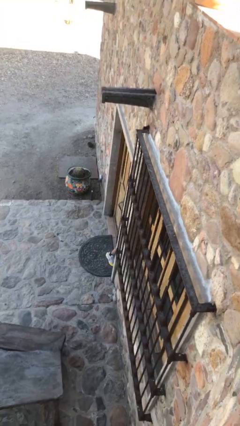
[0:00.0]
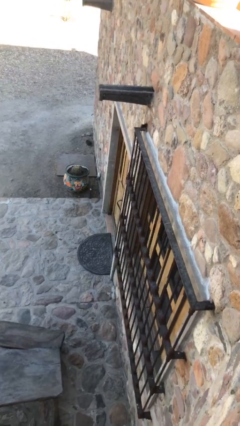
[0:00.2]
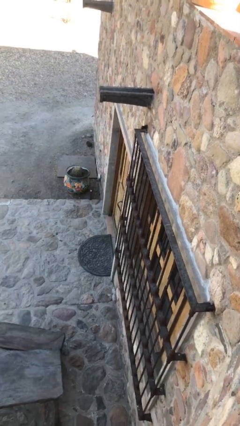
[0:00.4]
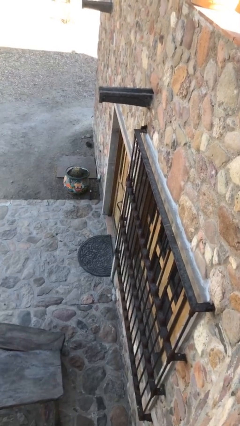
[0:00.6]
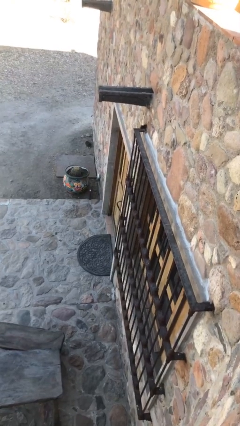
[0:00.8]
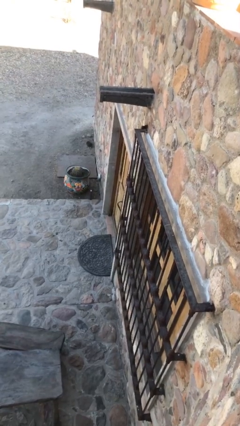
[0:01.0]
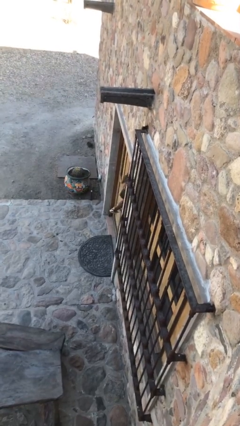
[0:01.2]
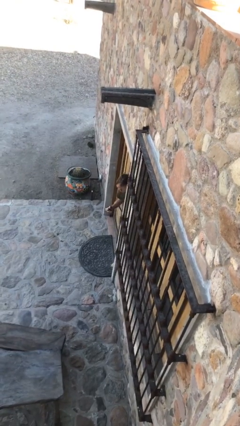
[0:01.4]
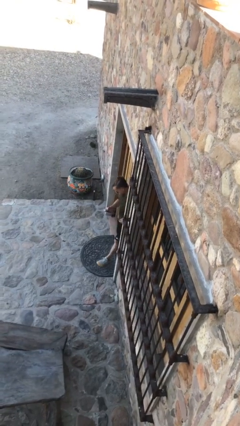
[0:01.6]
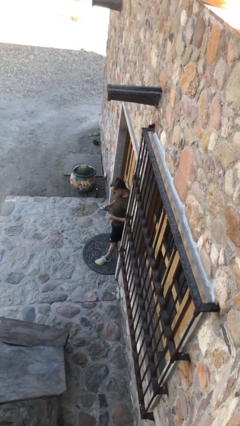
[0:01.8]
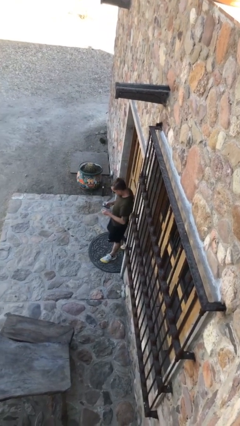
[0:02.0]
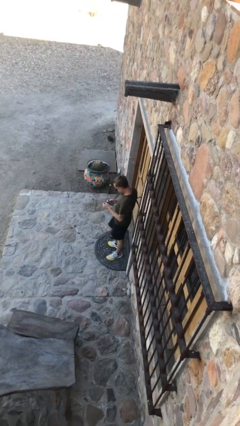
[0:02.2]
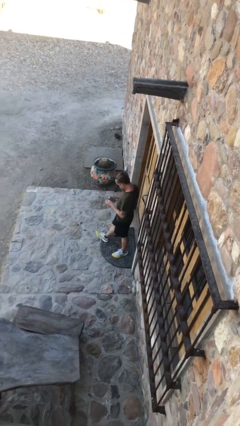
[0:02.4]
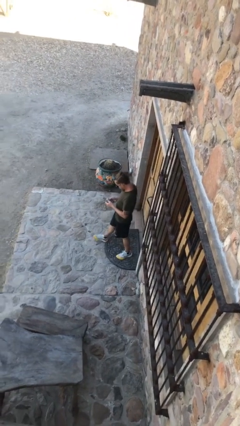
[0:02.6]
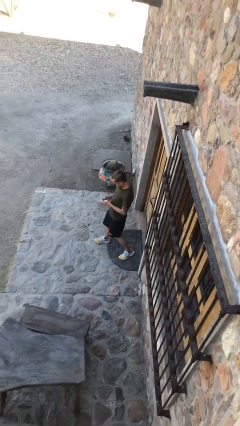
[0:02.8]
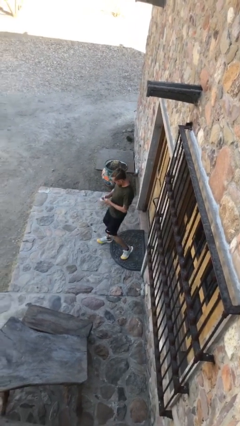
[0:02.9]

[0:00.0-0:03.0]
person enters scene through structure

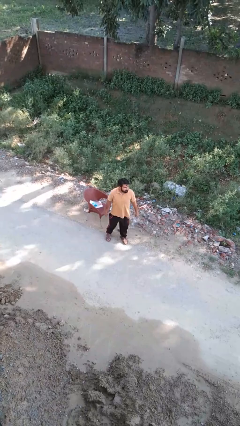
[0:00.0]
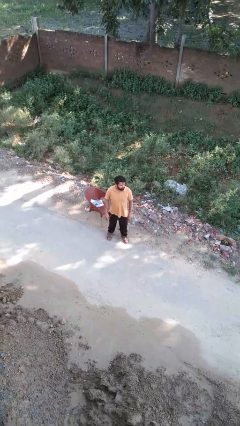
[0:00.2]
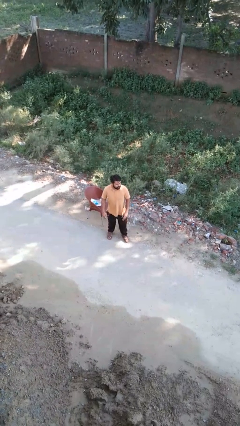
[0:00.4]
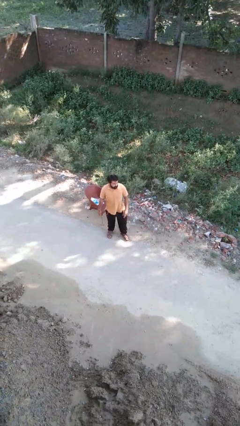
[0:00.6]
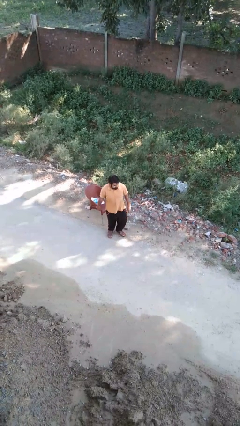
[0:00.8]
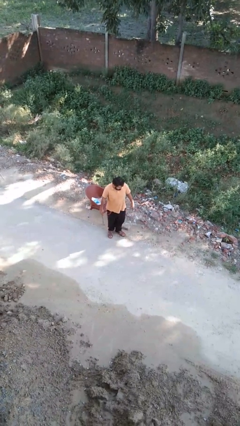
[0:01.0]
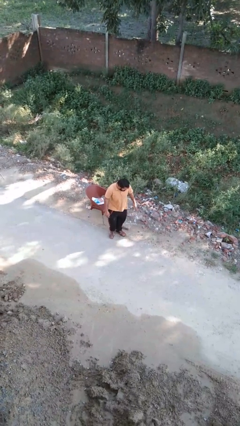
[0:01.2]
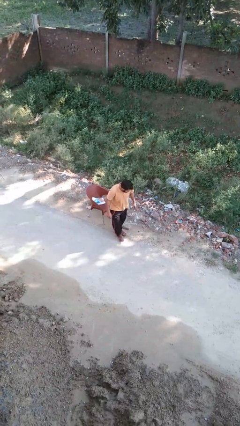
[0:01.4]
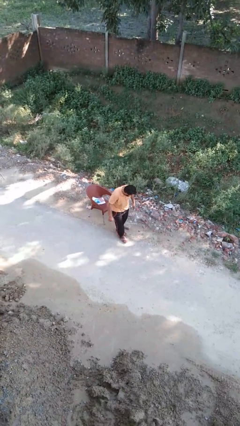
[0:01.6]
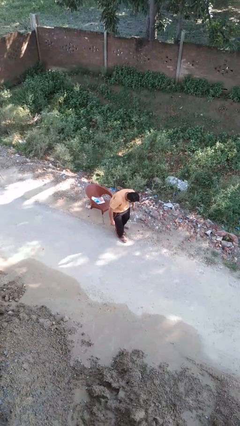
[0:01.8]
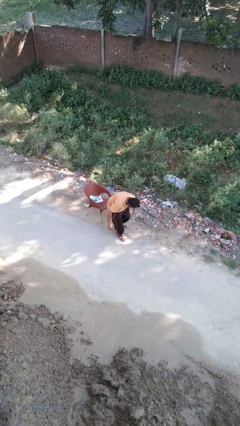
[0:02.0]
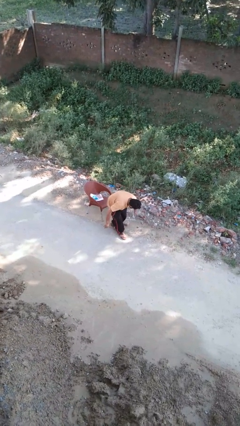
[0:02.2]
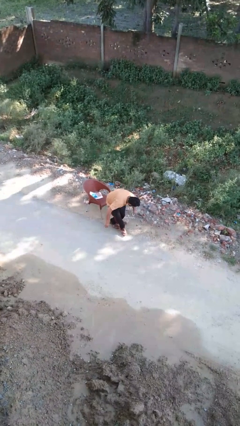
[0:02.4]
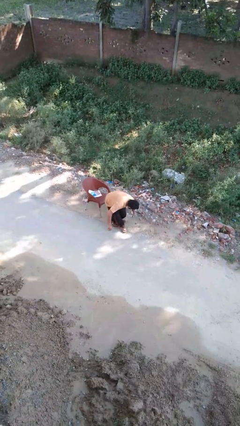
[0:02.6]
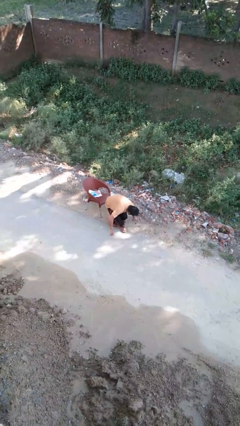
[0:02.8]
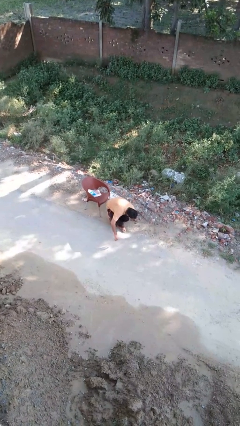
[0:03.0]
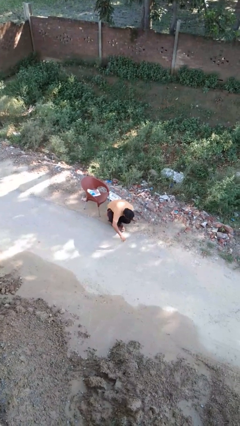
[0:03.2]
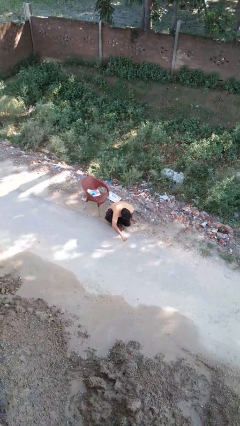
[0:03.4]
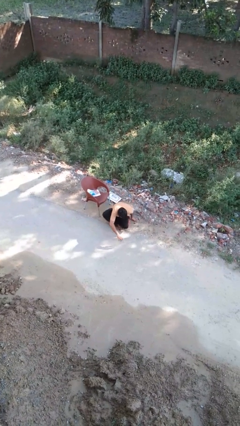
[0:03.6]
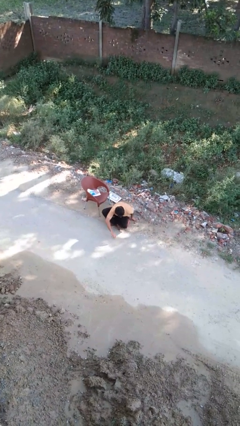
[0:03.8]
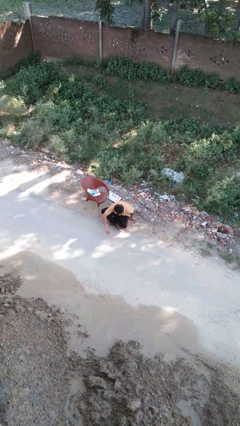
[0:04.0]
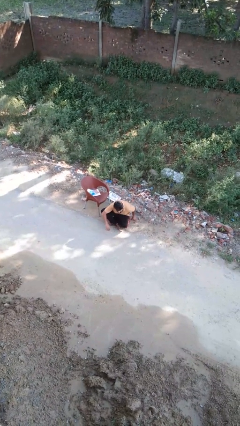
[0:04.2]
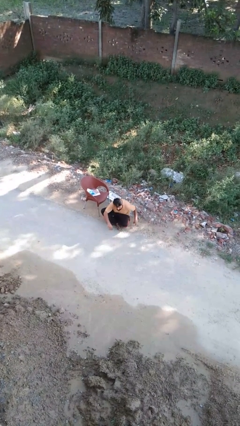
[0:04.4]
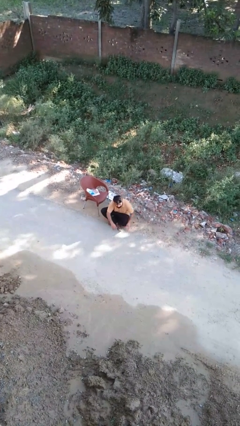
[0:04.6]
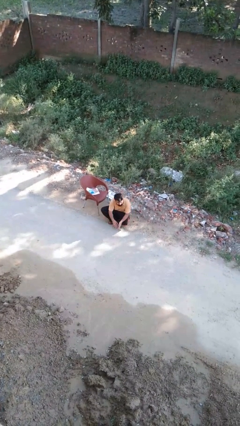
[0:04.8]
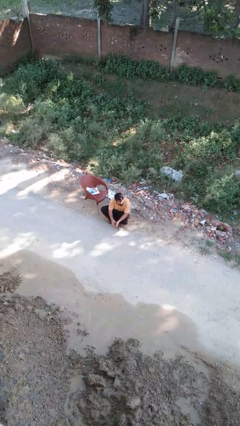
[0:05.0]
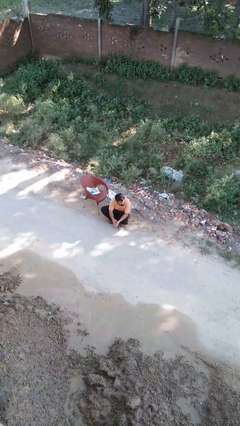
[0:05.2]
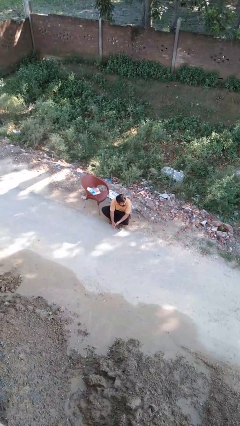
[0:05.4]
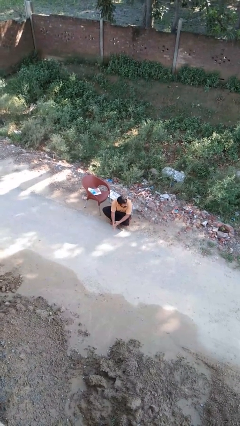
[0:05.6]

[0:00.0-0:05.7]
person sits crisscross

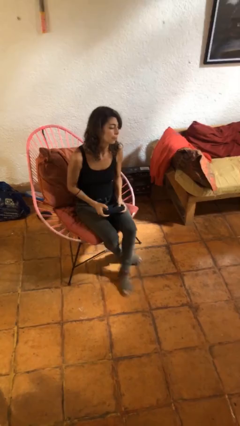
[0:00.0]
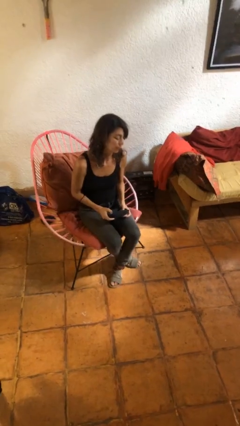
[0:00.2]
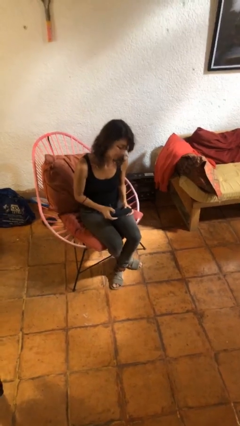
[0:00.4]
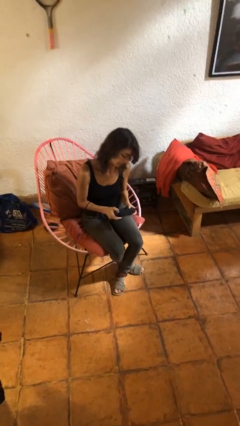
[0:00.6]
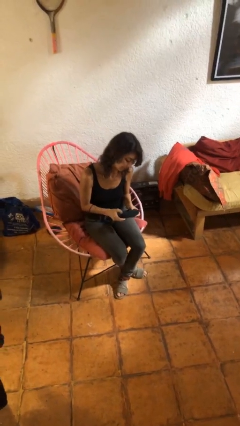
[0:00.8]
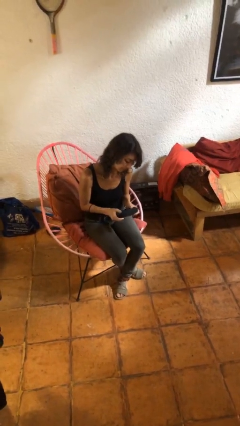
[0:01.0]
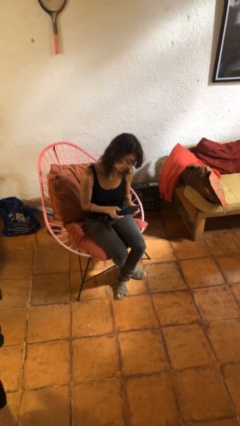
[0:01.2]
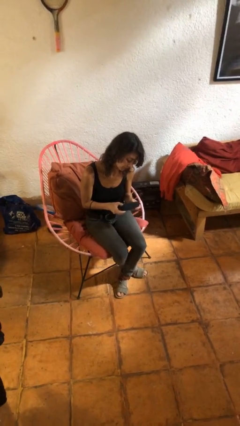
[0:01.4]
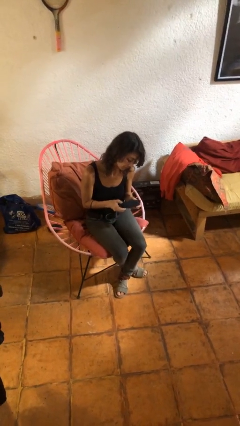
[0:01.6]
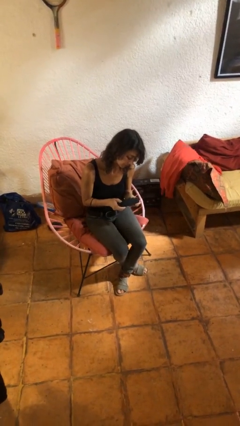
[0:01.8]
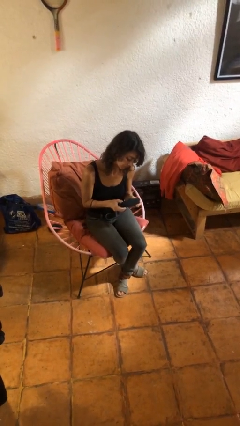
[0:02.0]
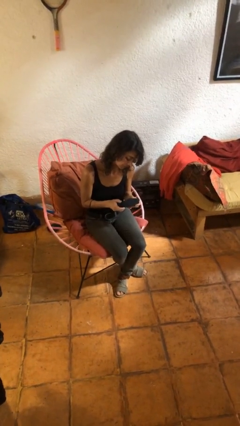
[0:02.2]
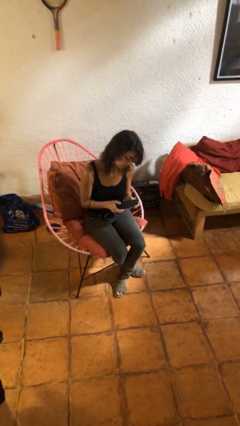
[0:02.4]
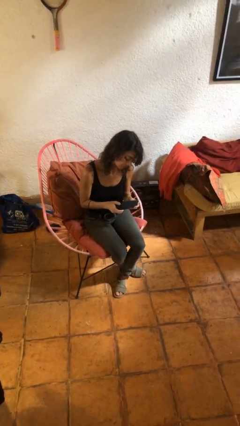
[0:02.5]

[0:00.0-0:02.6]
person interacts with handheld game

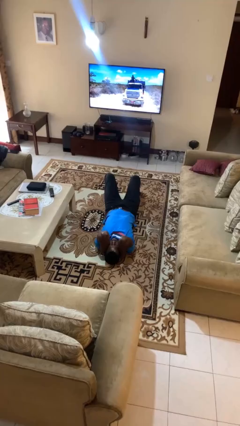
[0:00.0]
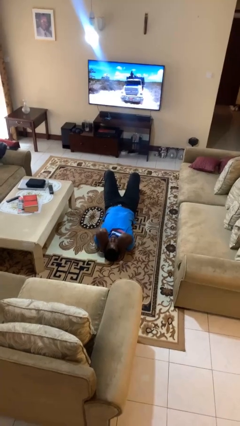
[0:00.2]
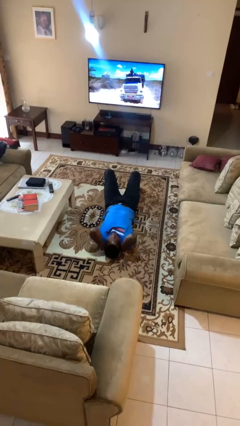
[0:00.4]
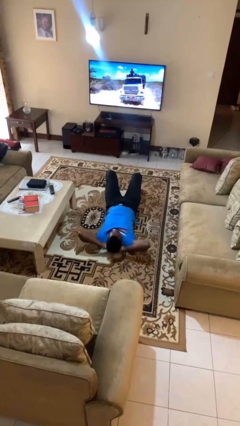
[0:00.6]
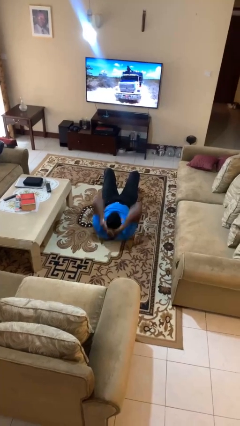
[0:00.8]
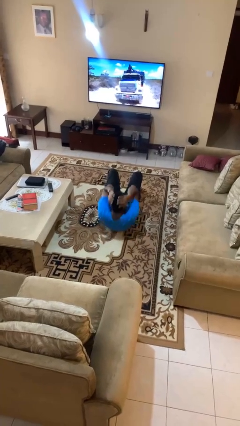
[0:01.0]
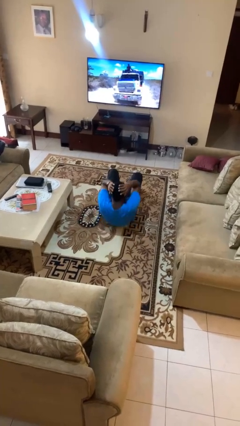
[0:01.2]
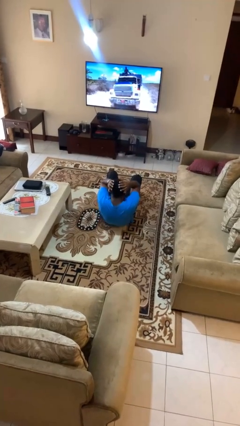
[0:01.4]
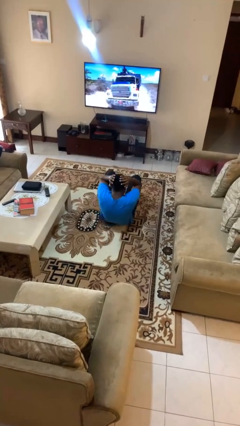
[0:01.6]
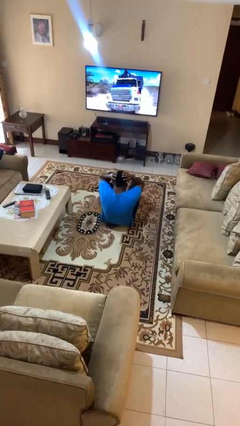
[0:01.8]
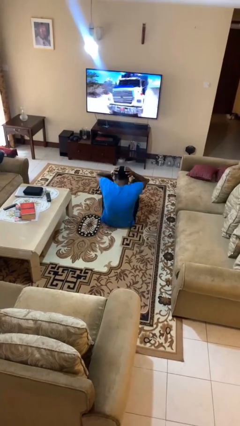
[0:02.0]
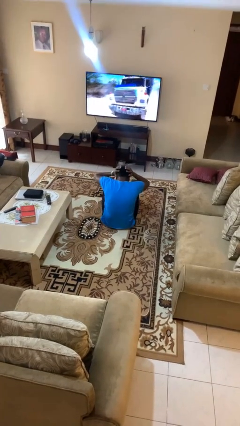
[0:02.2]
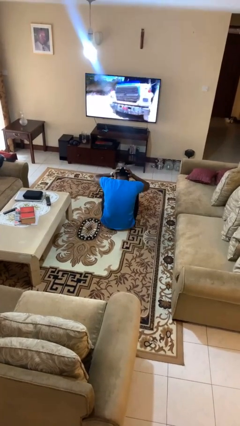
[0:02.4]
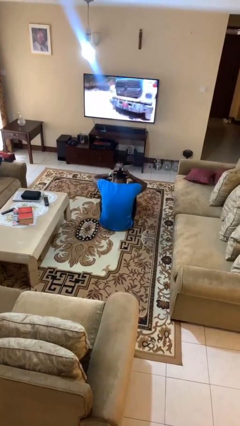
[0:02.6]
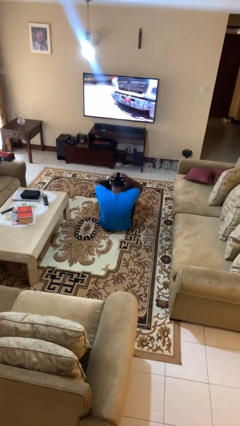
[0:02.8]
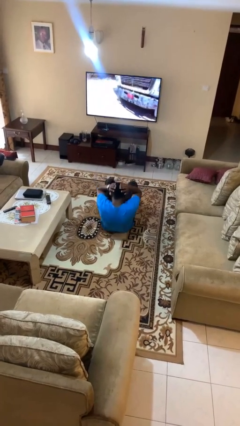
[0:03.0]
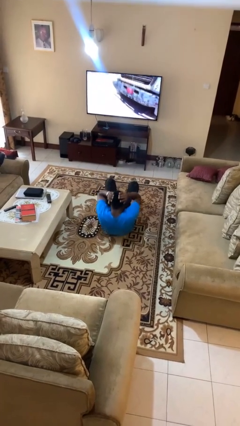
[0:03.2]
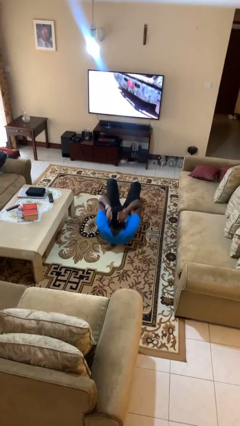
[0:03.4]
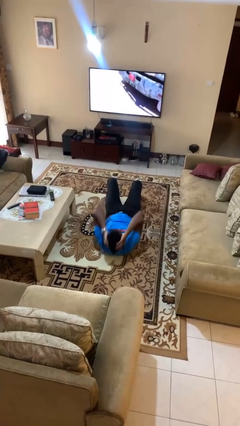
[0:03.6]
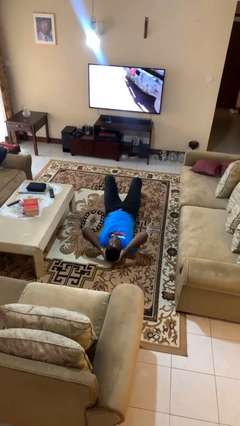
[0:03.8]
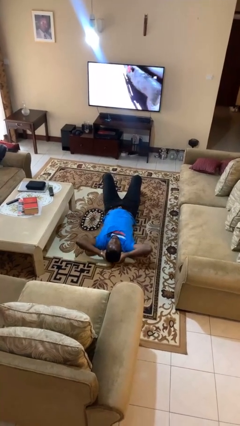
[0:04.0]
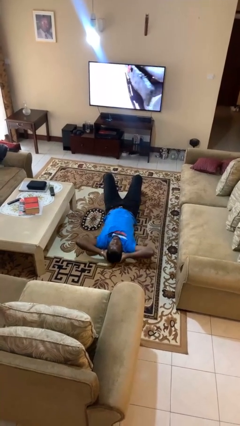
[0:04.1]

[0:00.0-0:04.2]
person exercises with situp

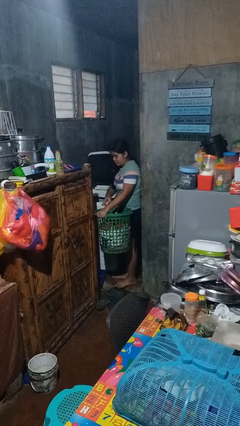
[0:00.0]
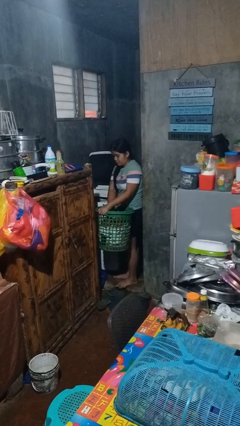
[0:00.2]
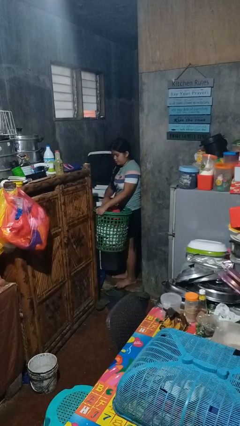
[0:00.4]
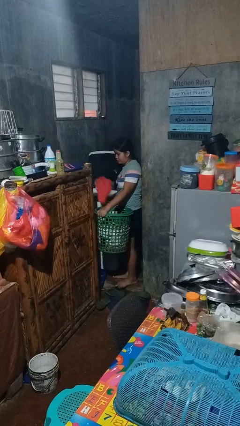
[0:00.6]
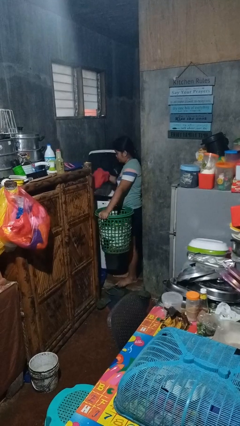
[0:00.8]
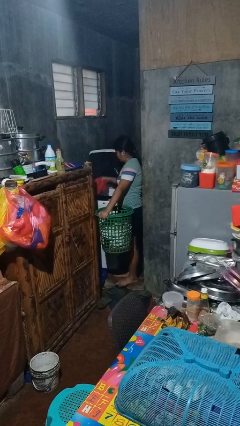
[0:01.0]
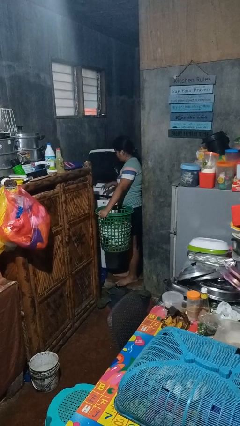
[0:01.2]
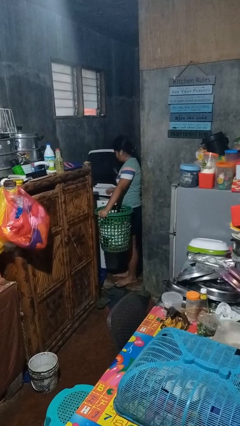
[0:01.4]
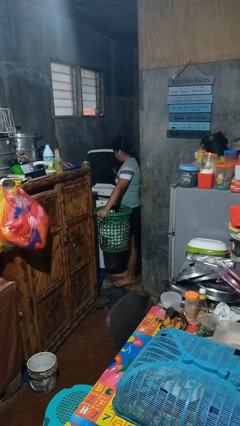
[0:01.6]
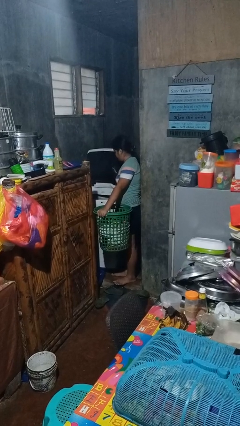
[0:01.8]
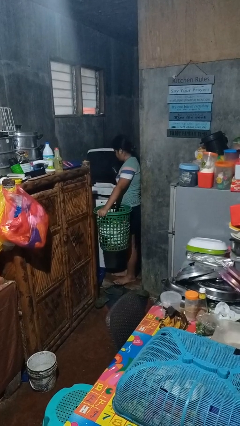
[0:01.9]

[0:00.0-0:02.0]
person loads clotheswasher

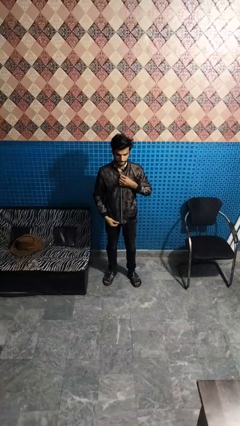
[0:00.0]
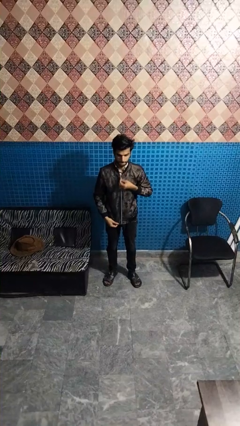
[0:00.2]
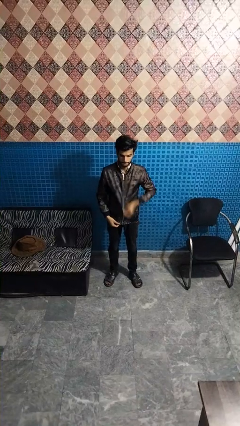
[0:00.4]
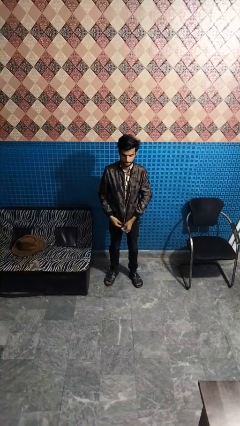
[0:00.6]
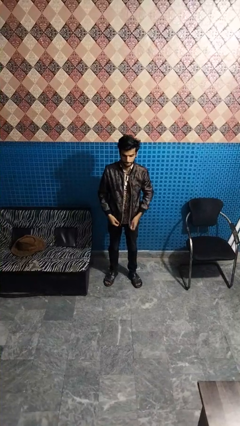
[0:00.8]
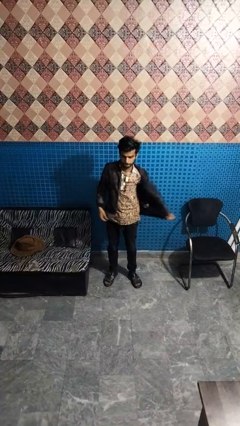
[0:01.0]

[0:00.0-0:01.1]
person unzips jacket
